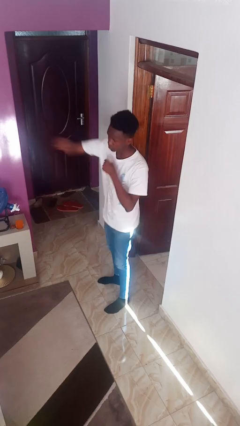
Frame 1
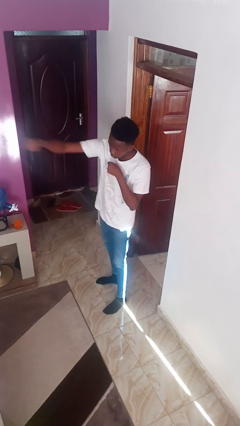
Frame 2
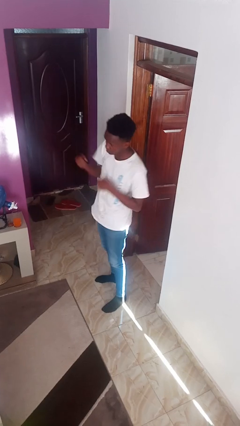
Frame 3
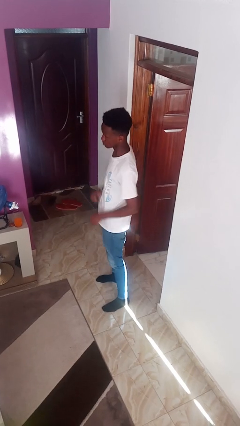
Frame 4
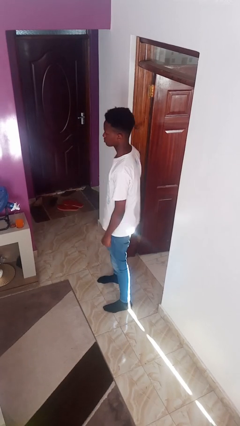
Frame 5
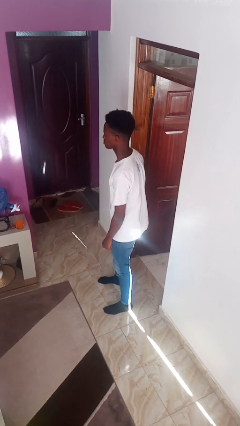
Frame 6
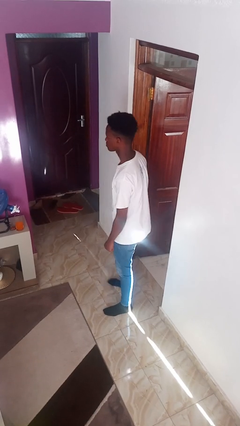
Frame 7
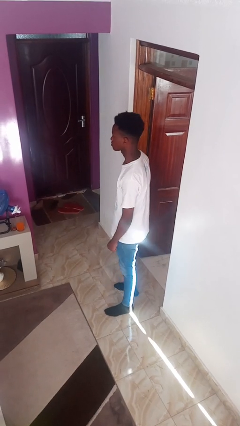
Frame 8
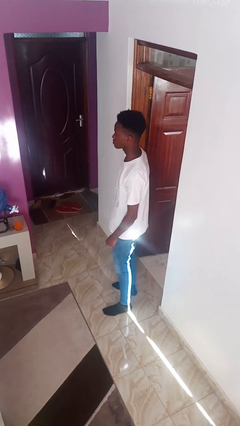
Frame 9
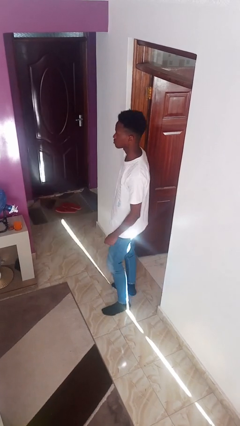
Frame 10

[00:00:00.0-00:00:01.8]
person punches

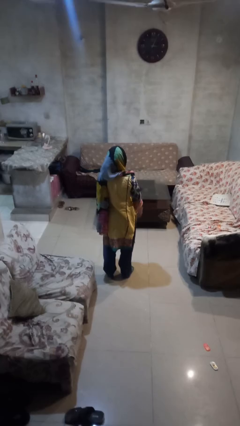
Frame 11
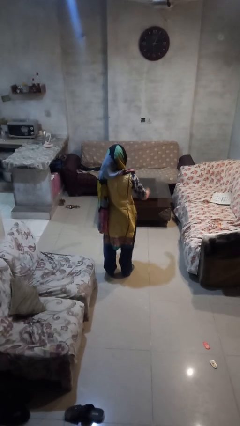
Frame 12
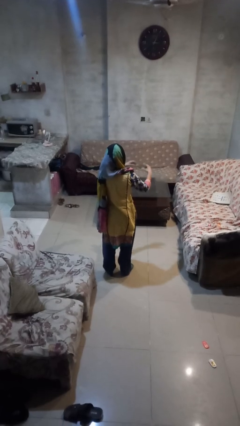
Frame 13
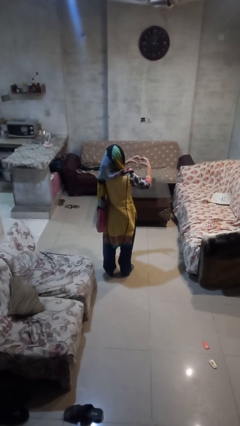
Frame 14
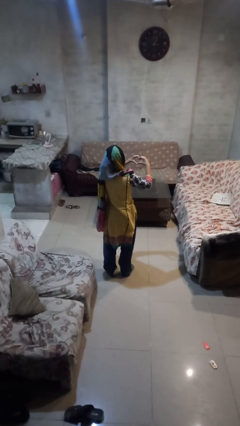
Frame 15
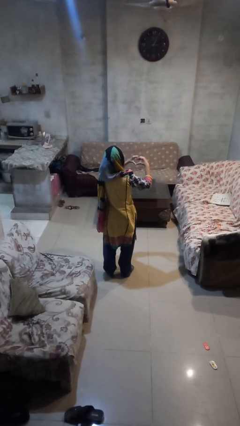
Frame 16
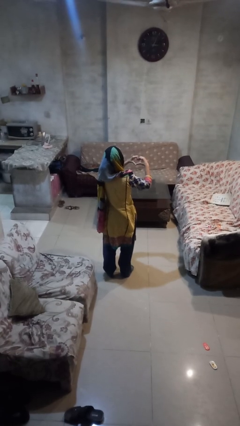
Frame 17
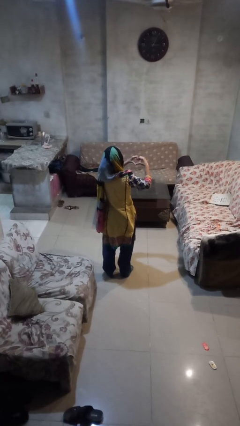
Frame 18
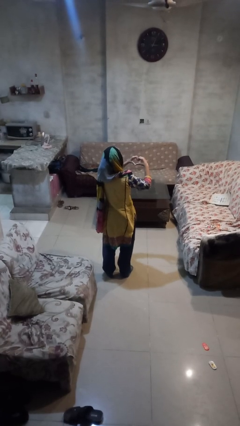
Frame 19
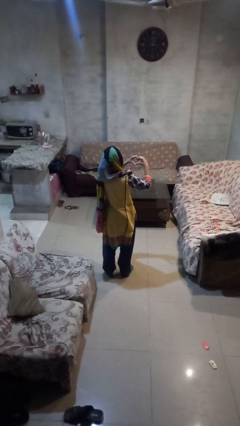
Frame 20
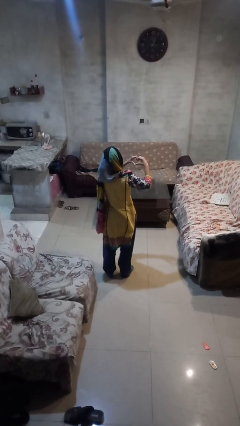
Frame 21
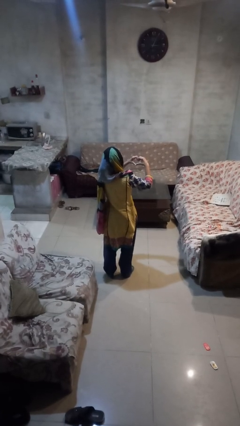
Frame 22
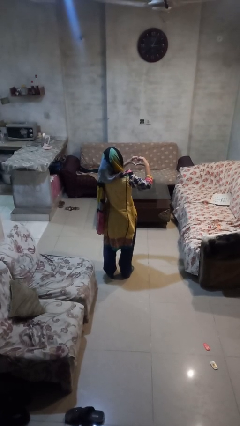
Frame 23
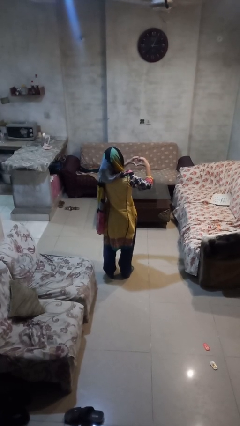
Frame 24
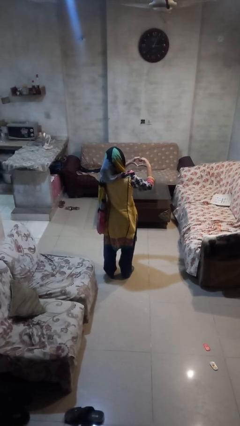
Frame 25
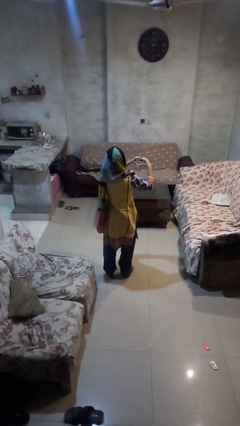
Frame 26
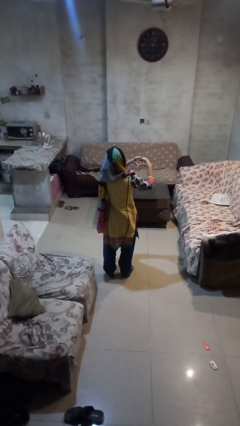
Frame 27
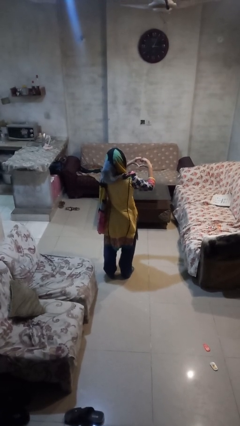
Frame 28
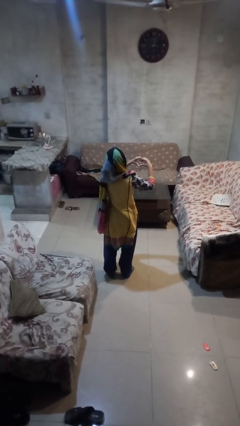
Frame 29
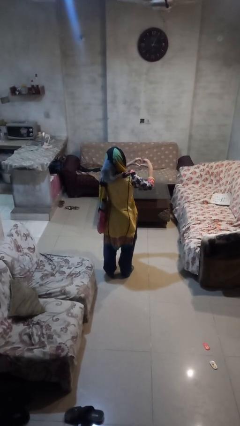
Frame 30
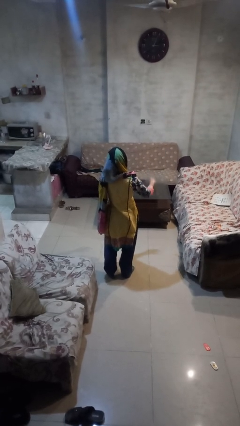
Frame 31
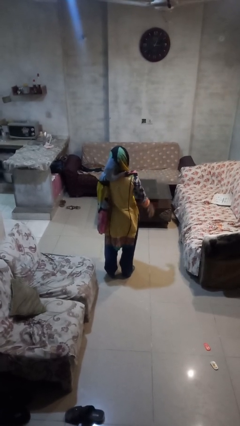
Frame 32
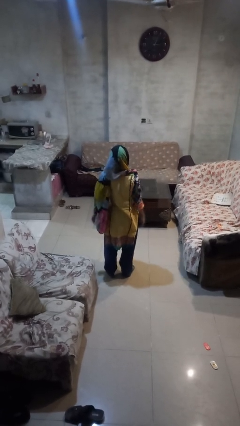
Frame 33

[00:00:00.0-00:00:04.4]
person gestures heart

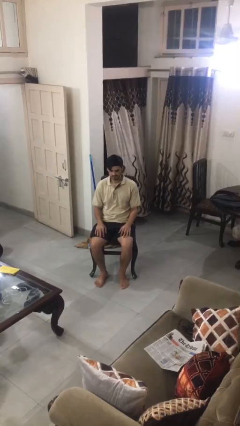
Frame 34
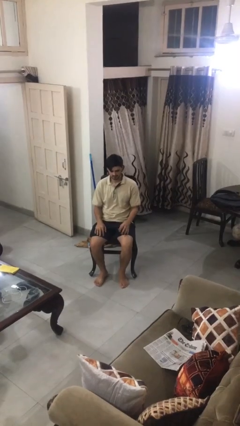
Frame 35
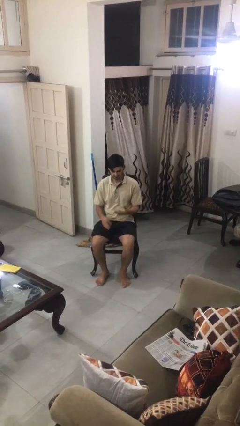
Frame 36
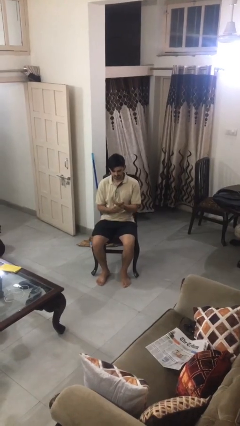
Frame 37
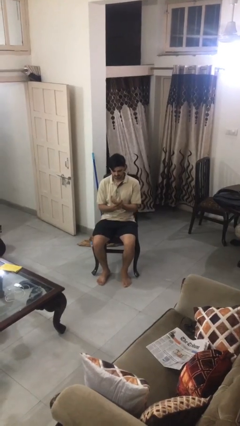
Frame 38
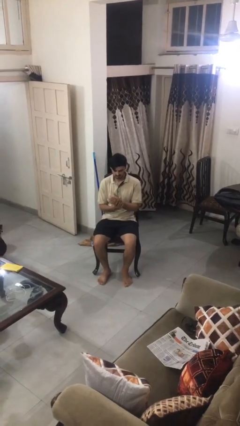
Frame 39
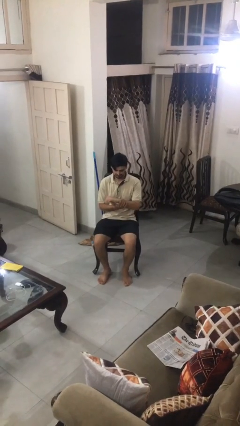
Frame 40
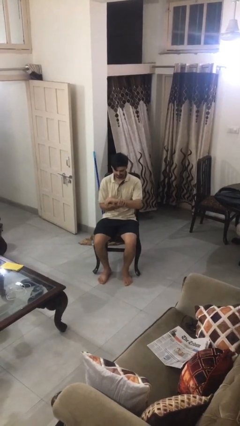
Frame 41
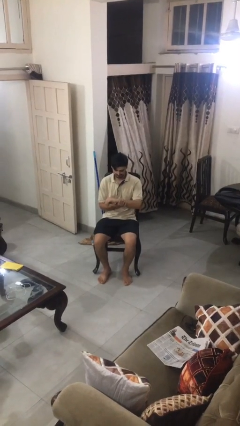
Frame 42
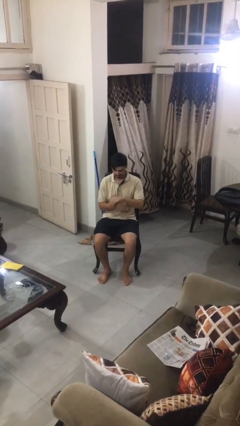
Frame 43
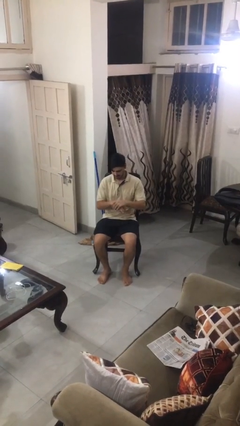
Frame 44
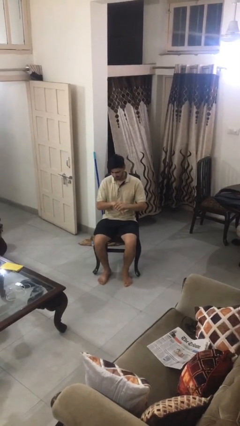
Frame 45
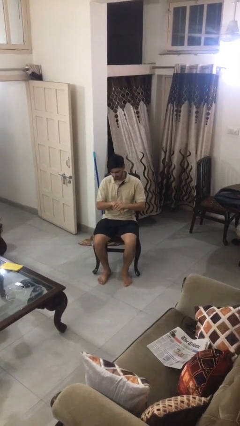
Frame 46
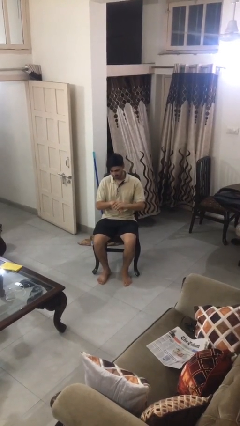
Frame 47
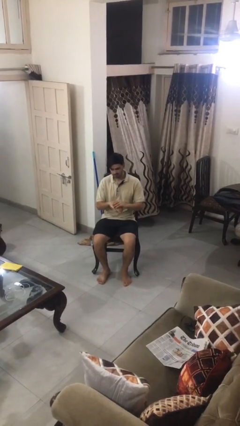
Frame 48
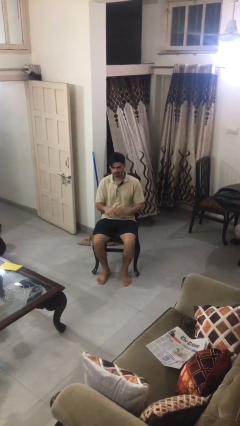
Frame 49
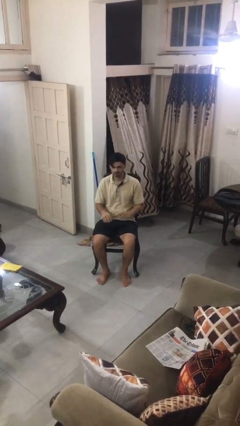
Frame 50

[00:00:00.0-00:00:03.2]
person looks at hands in lap

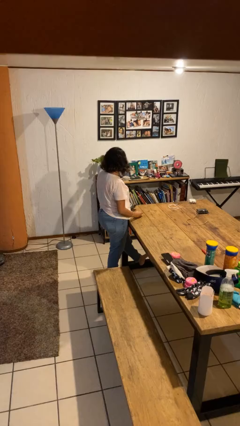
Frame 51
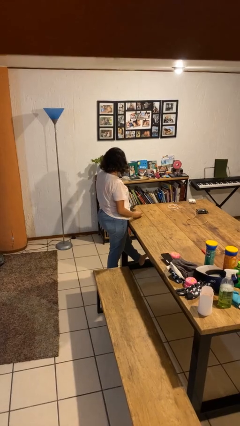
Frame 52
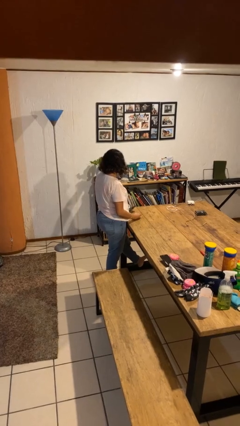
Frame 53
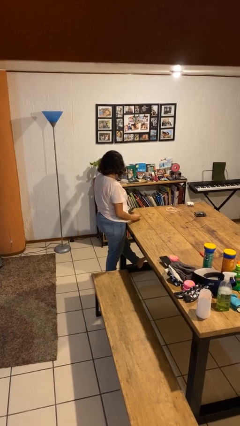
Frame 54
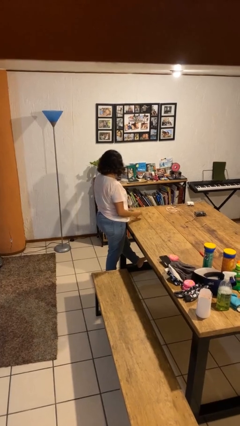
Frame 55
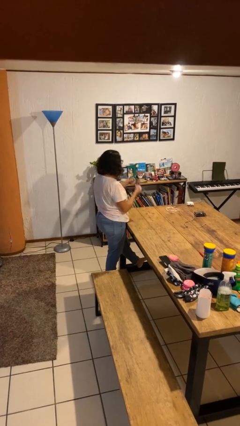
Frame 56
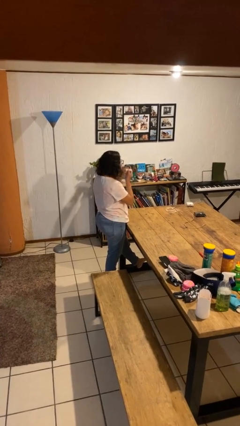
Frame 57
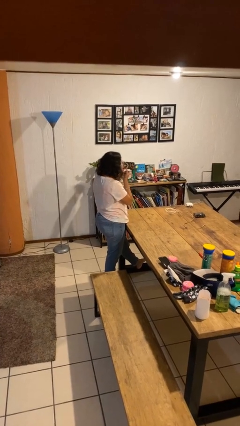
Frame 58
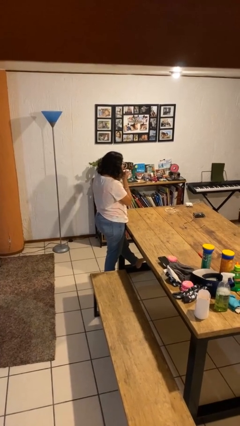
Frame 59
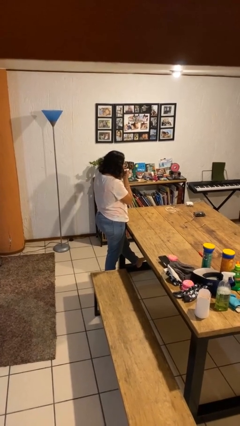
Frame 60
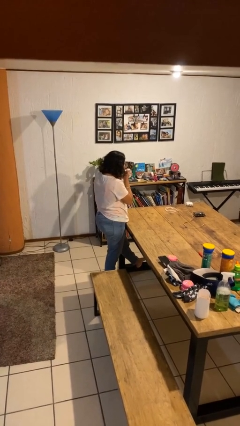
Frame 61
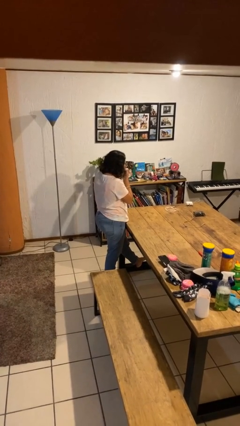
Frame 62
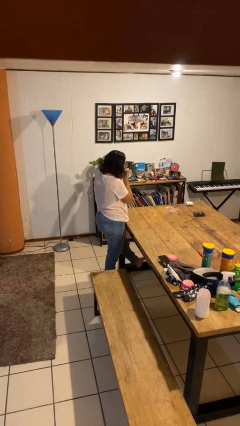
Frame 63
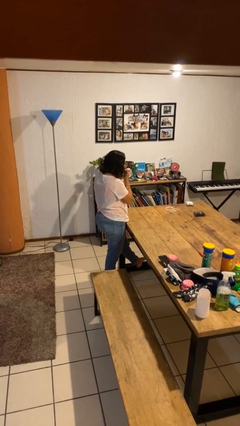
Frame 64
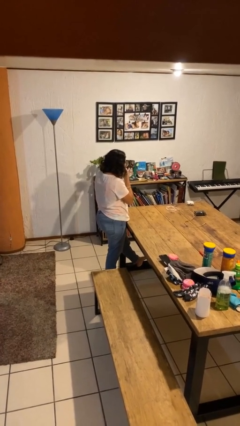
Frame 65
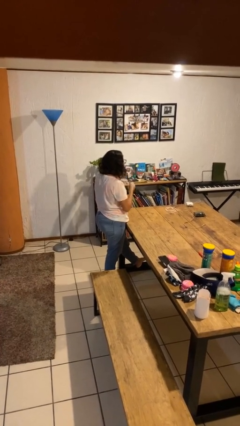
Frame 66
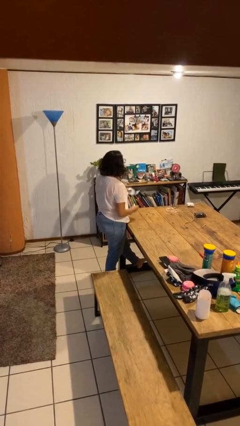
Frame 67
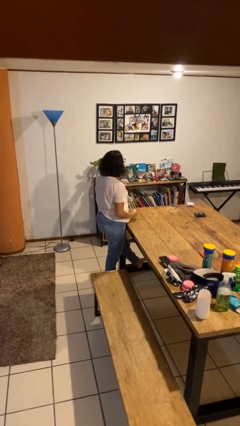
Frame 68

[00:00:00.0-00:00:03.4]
person applies lip makeup

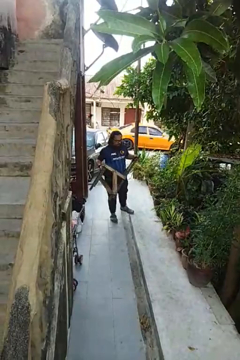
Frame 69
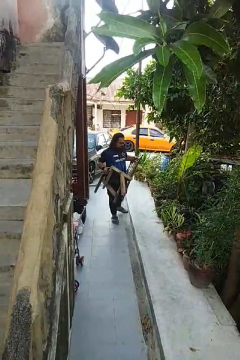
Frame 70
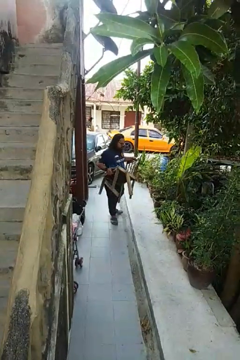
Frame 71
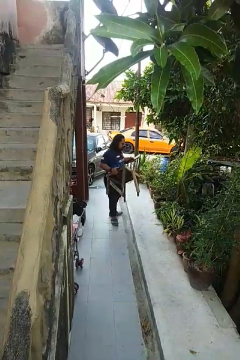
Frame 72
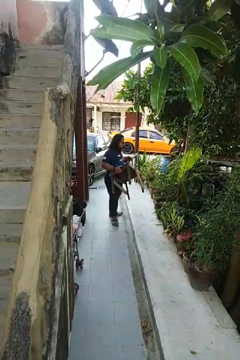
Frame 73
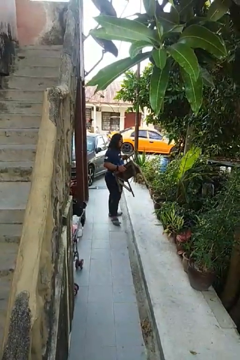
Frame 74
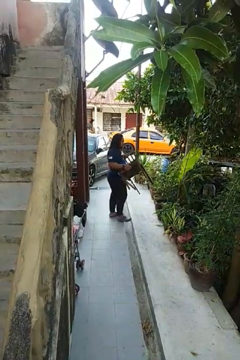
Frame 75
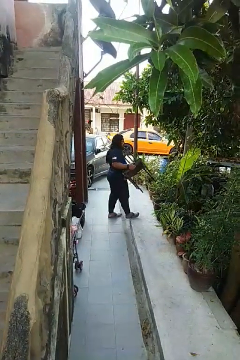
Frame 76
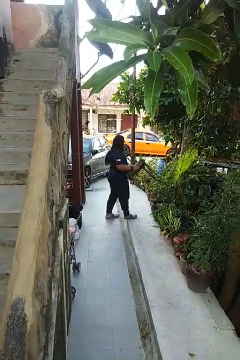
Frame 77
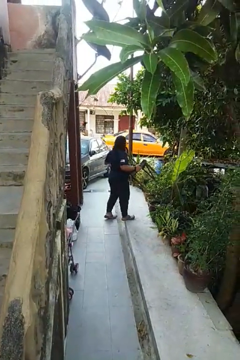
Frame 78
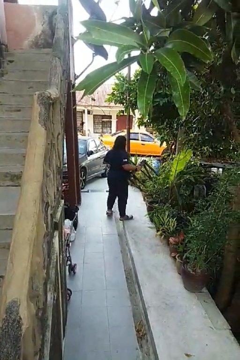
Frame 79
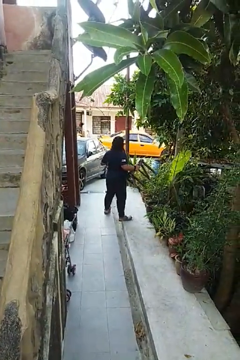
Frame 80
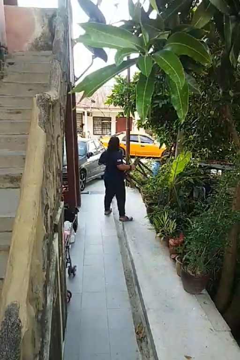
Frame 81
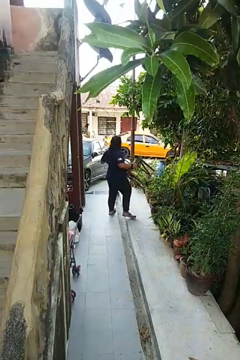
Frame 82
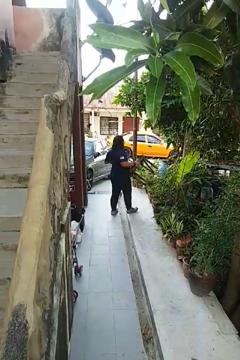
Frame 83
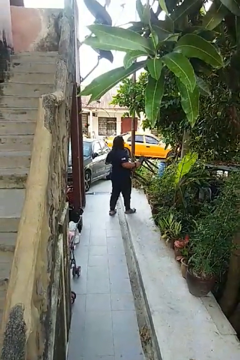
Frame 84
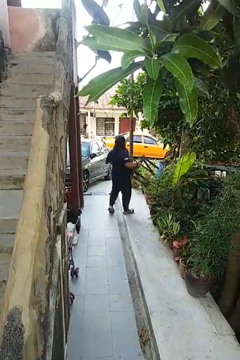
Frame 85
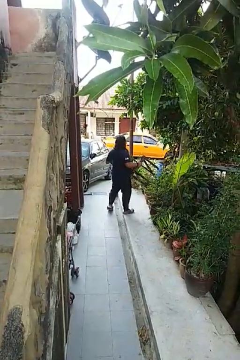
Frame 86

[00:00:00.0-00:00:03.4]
person carries furniture

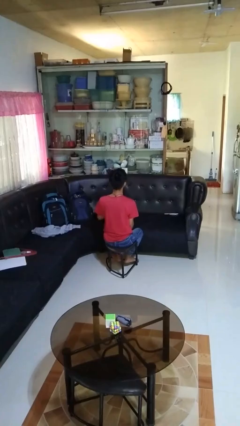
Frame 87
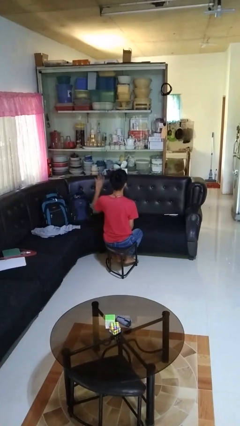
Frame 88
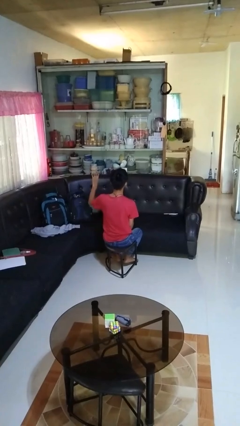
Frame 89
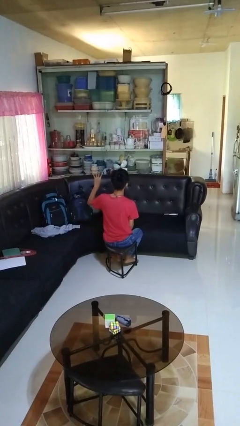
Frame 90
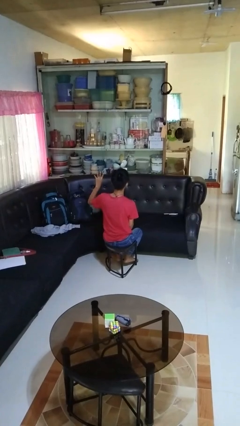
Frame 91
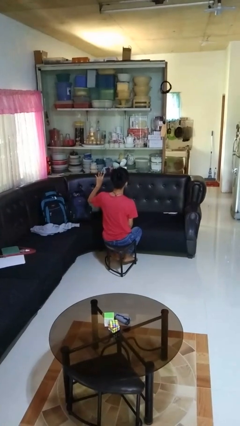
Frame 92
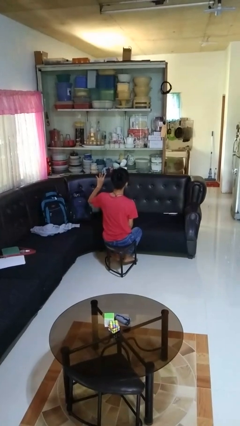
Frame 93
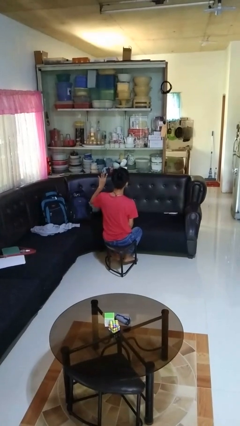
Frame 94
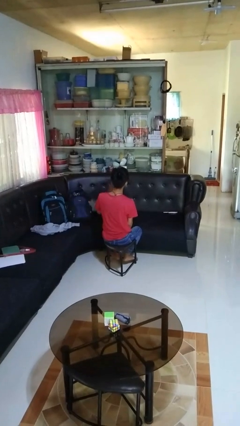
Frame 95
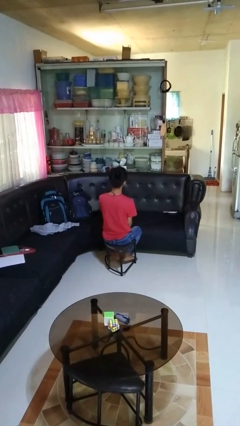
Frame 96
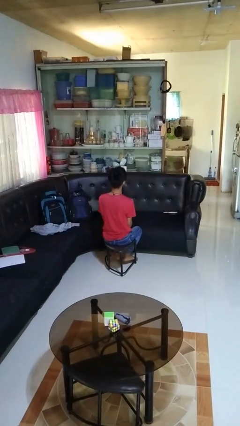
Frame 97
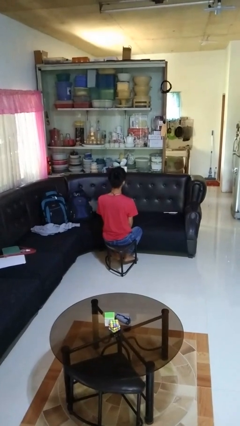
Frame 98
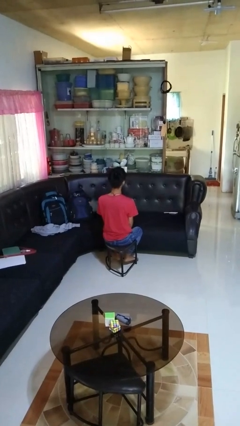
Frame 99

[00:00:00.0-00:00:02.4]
person gestures number four
